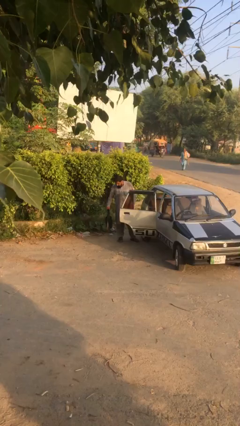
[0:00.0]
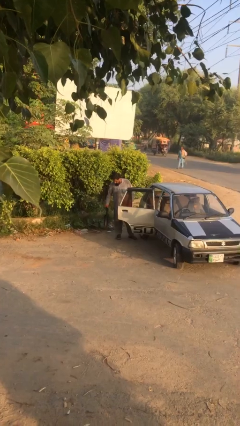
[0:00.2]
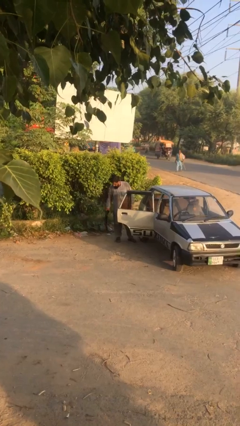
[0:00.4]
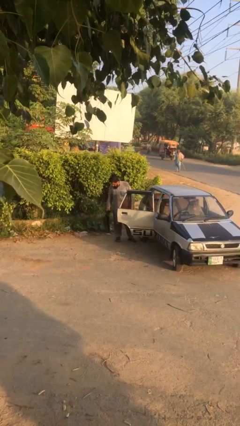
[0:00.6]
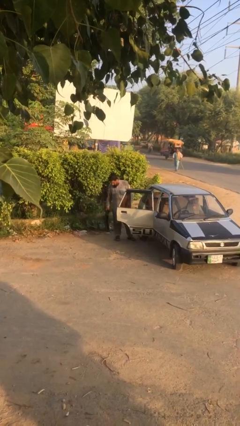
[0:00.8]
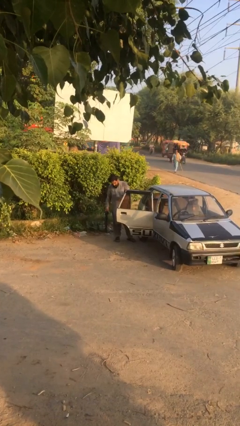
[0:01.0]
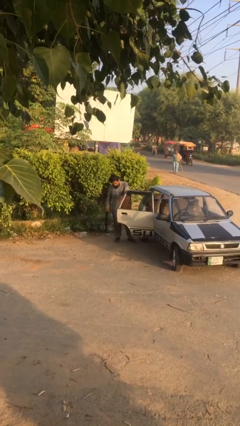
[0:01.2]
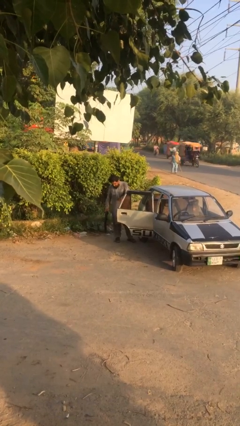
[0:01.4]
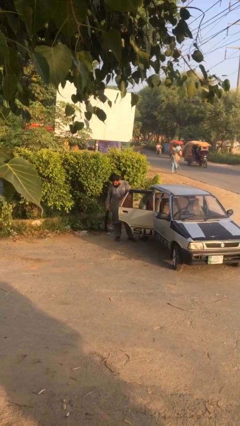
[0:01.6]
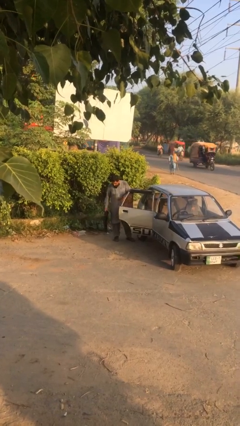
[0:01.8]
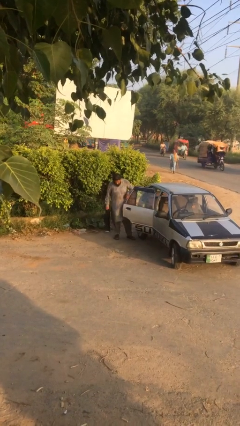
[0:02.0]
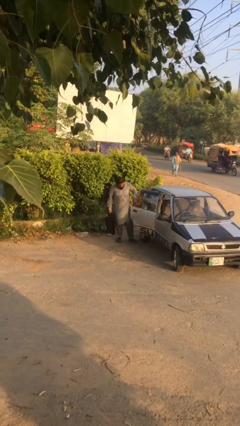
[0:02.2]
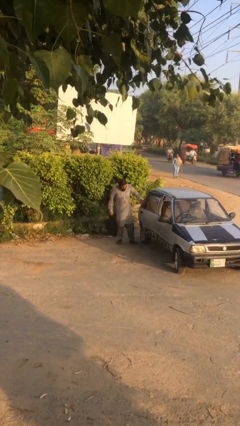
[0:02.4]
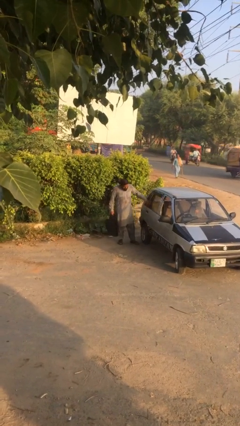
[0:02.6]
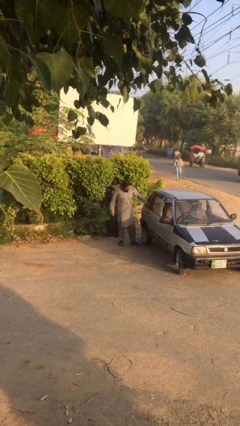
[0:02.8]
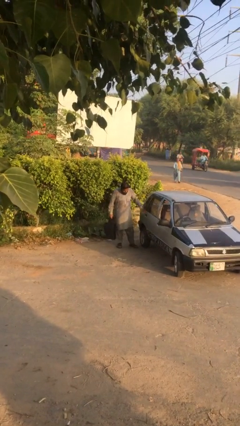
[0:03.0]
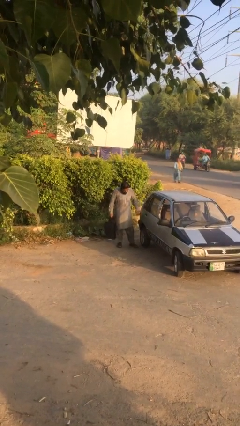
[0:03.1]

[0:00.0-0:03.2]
person closes car door

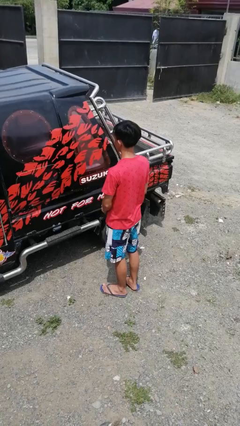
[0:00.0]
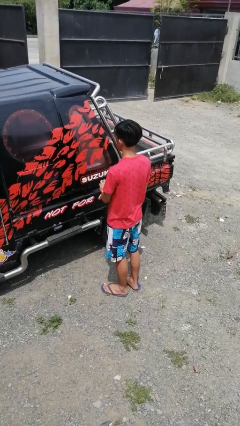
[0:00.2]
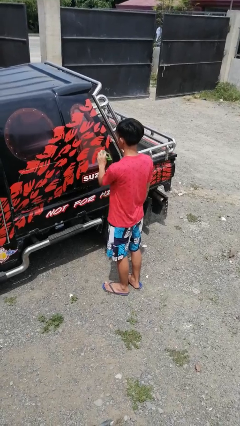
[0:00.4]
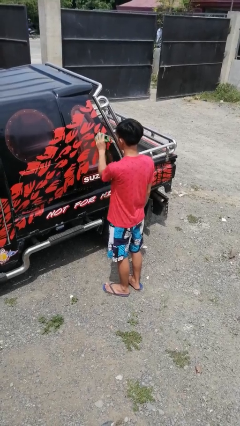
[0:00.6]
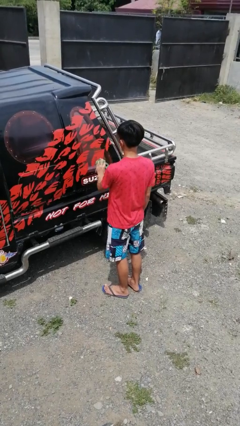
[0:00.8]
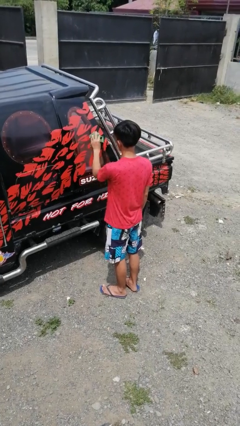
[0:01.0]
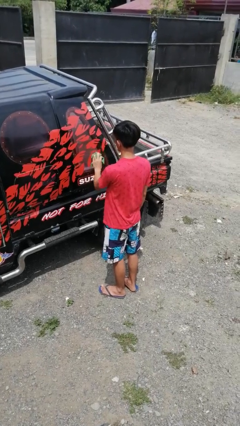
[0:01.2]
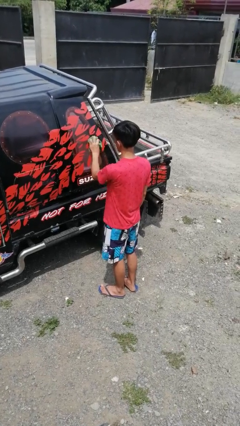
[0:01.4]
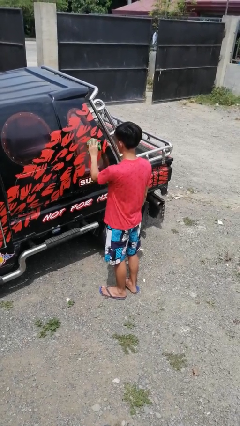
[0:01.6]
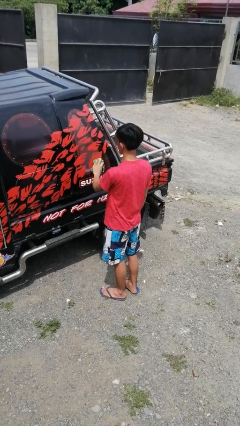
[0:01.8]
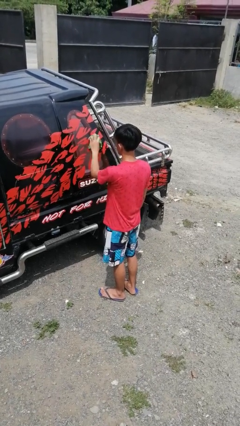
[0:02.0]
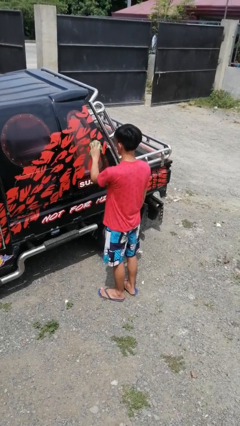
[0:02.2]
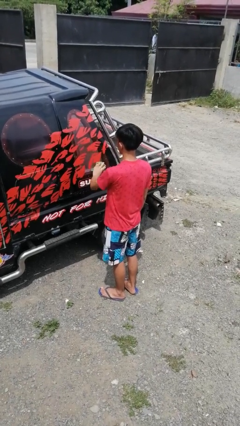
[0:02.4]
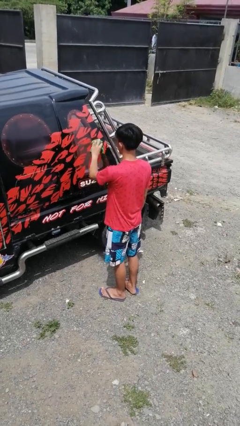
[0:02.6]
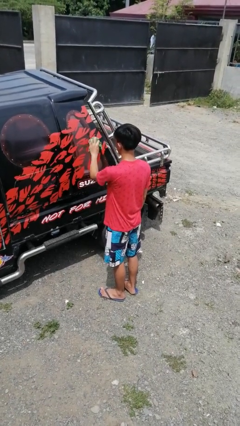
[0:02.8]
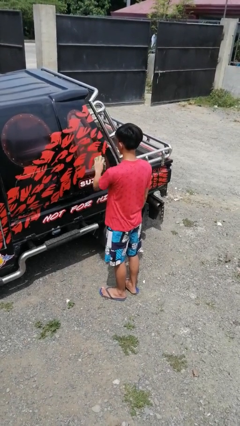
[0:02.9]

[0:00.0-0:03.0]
person polishes car with rag

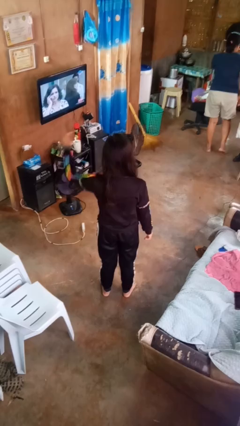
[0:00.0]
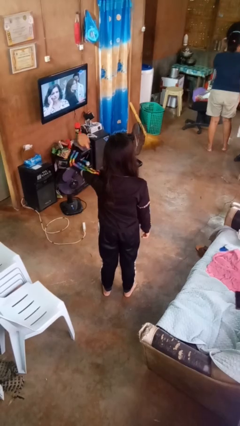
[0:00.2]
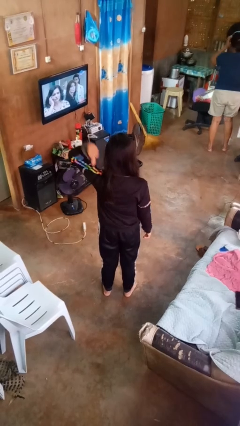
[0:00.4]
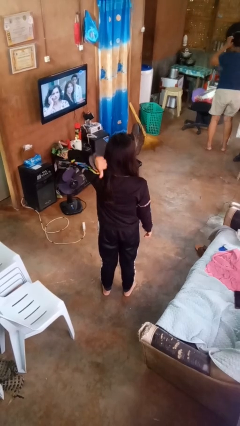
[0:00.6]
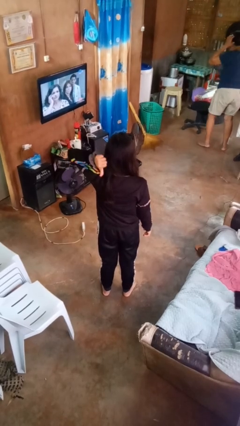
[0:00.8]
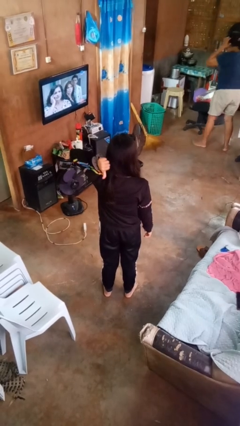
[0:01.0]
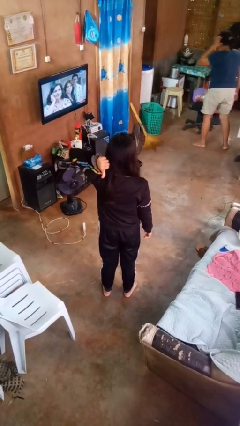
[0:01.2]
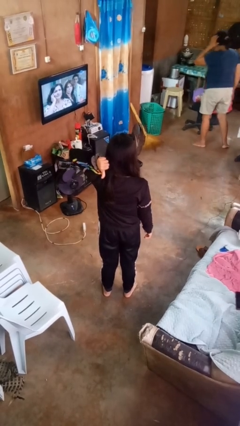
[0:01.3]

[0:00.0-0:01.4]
person gestures behind me

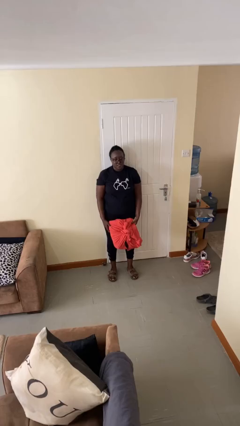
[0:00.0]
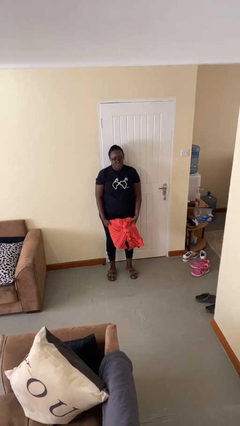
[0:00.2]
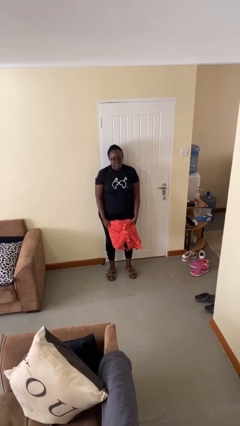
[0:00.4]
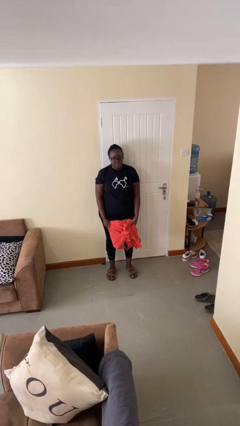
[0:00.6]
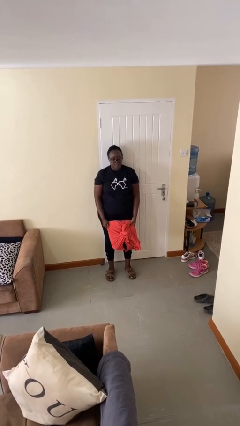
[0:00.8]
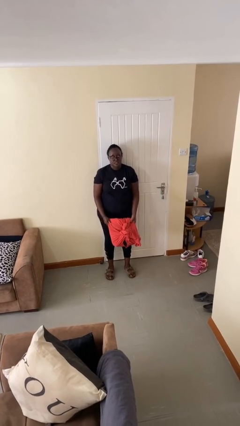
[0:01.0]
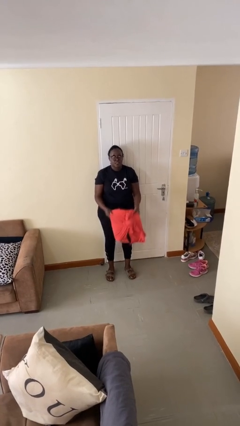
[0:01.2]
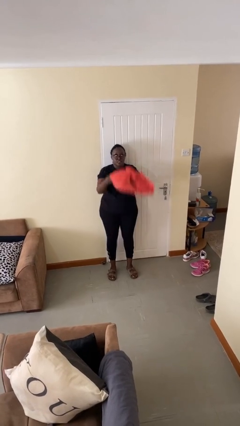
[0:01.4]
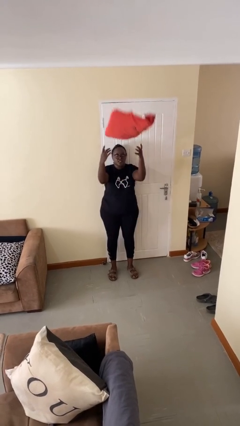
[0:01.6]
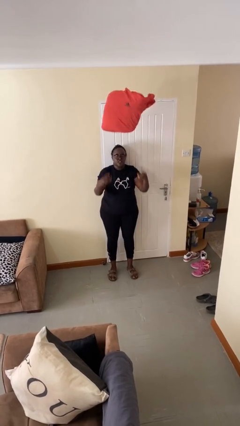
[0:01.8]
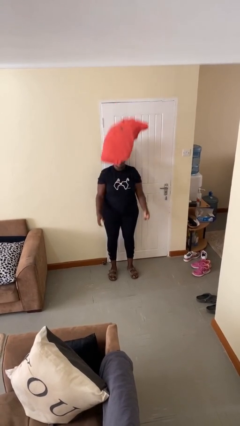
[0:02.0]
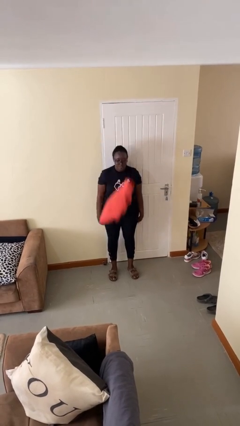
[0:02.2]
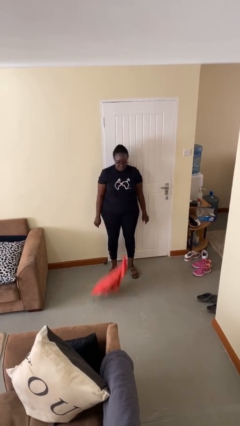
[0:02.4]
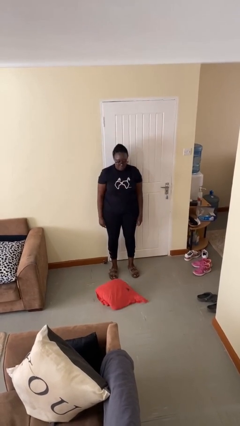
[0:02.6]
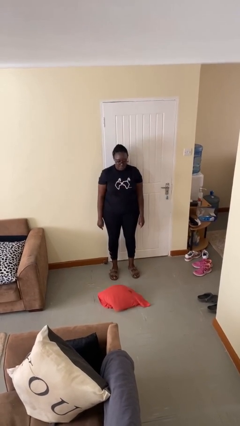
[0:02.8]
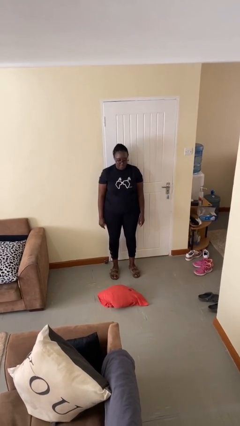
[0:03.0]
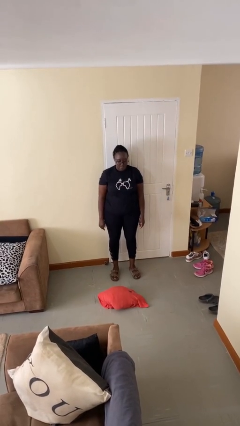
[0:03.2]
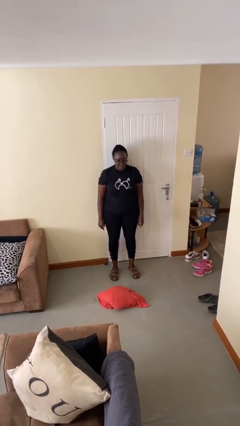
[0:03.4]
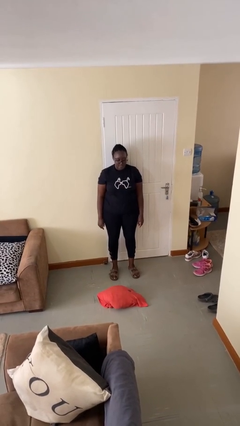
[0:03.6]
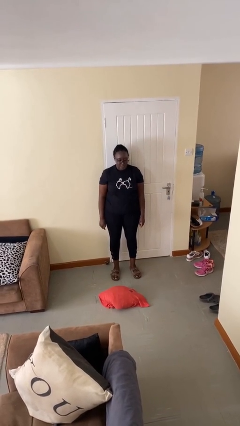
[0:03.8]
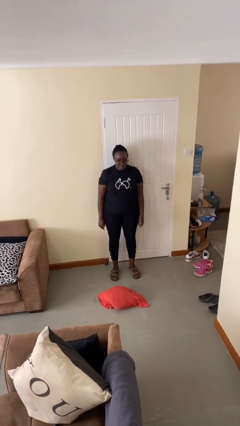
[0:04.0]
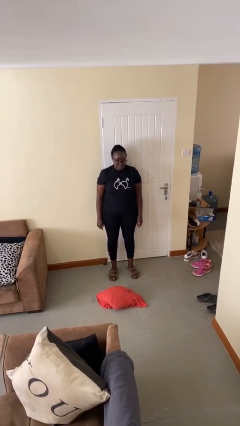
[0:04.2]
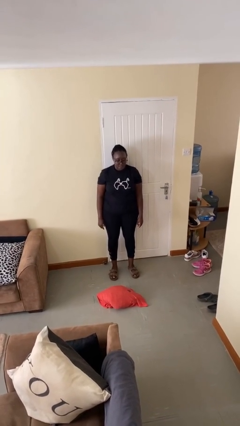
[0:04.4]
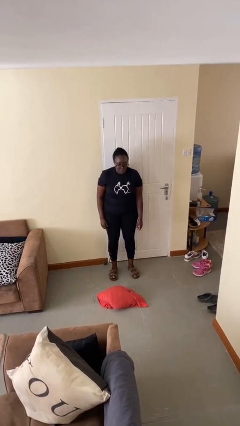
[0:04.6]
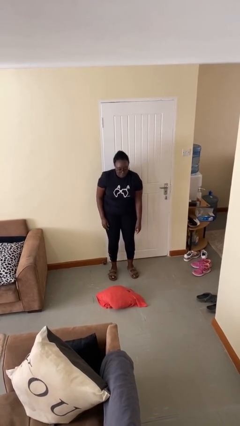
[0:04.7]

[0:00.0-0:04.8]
person throws object into air

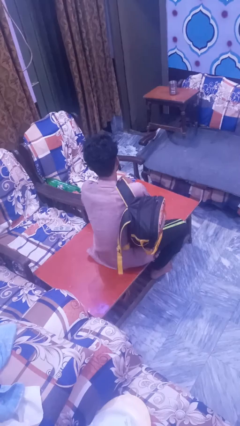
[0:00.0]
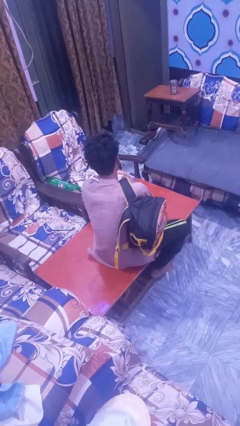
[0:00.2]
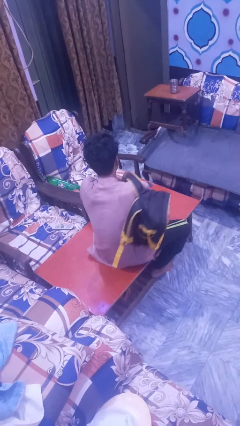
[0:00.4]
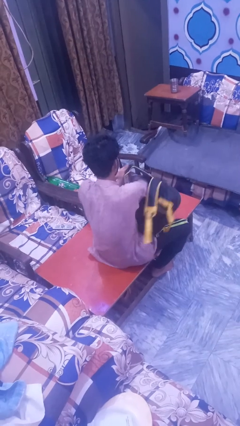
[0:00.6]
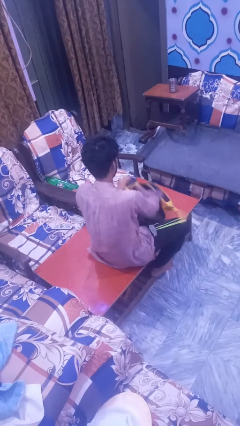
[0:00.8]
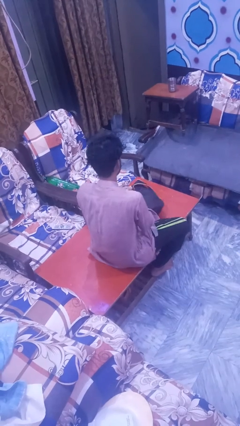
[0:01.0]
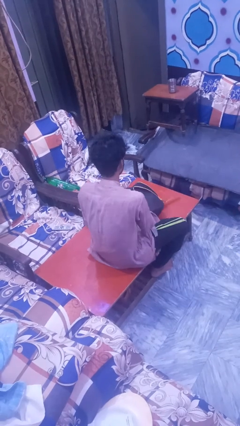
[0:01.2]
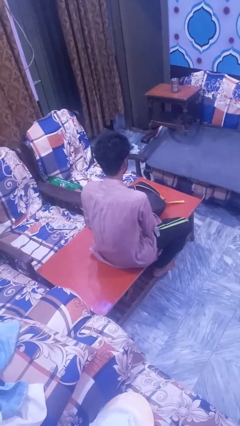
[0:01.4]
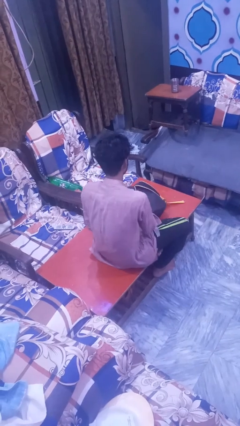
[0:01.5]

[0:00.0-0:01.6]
person takes off backpack

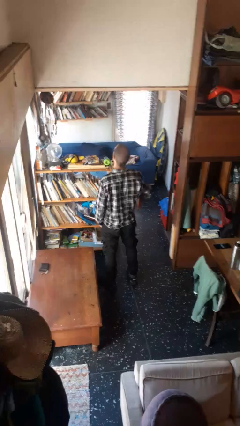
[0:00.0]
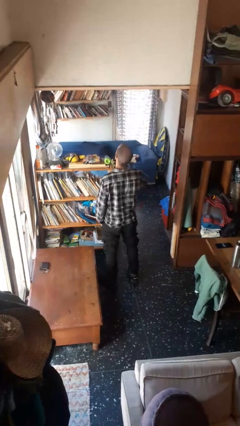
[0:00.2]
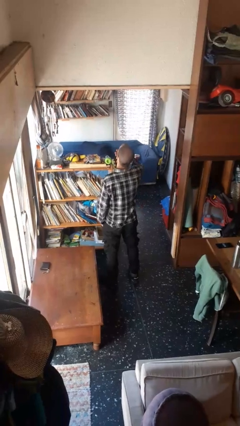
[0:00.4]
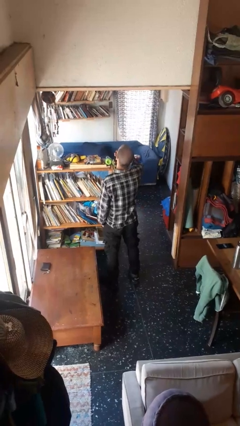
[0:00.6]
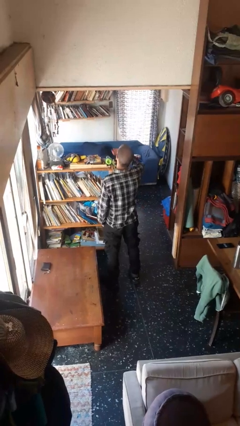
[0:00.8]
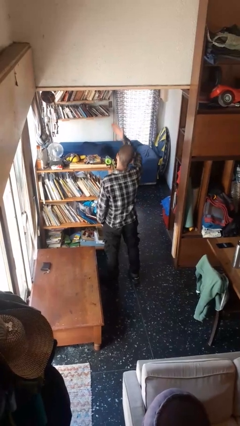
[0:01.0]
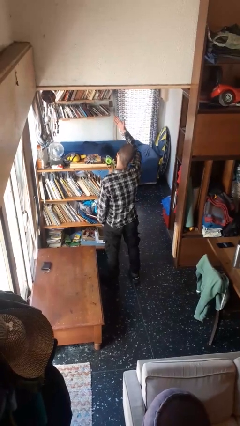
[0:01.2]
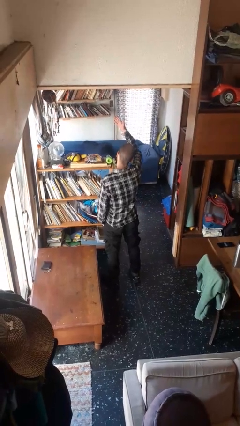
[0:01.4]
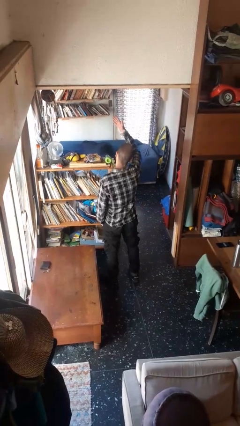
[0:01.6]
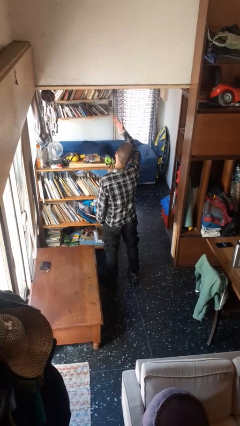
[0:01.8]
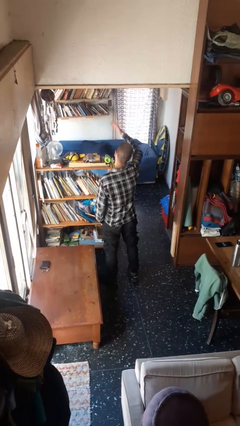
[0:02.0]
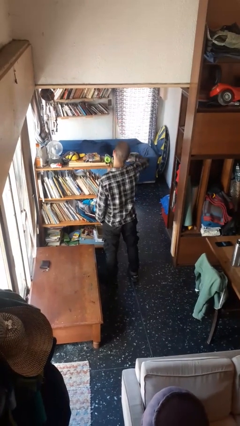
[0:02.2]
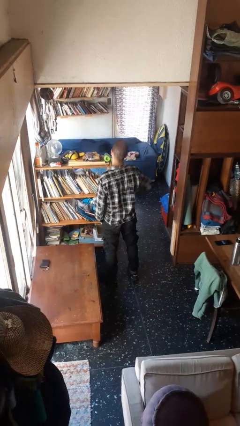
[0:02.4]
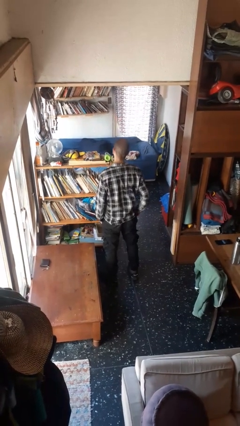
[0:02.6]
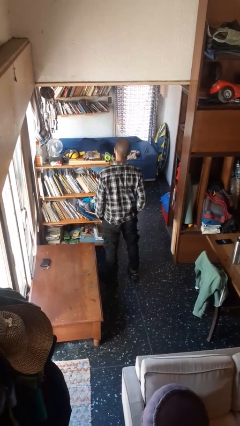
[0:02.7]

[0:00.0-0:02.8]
person gestures blow kiss

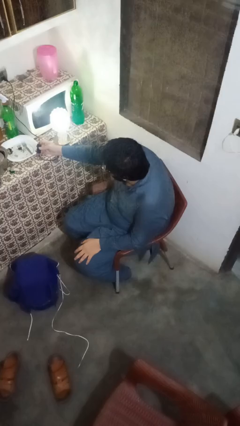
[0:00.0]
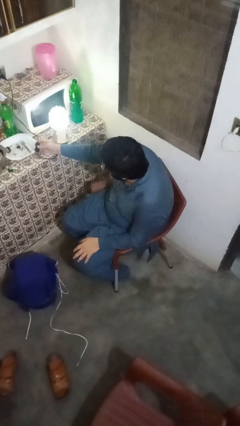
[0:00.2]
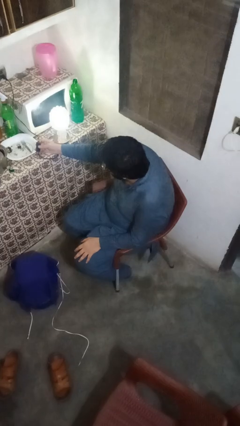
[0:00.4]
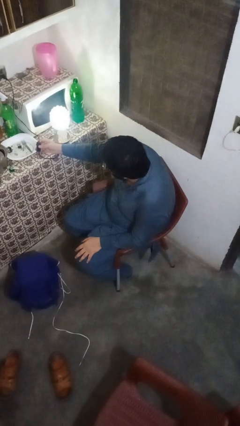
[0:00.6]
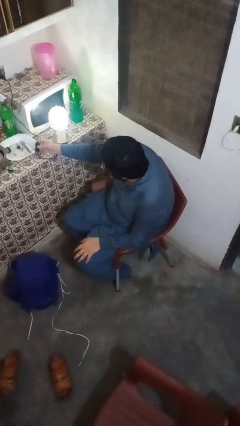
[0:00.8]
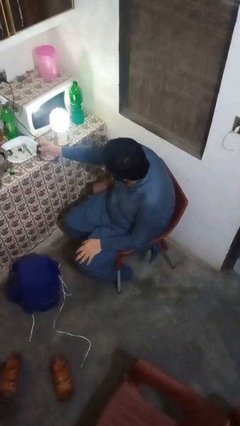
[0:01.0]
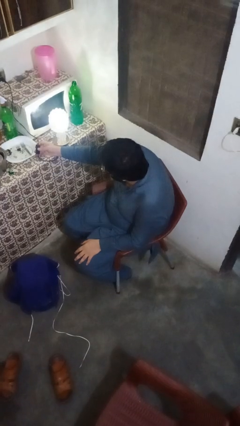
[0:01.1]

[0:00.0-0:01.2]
person turns on lamp
